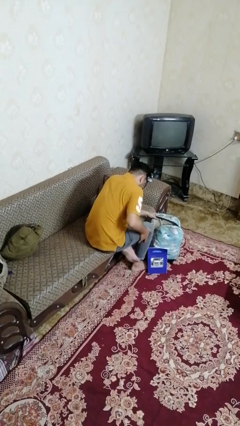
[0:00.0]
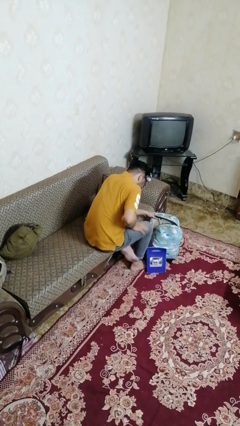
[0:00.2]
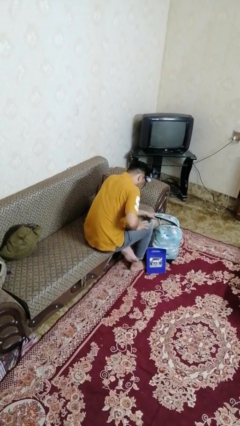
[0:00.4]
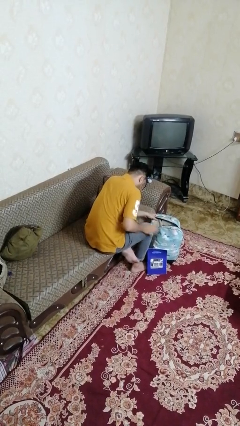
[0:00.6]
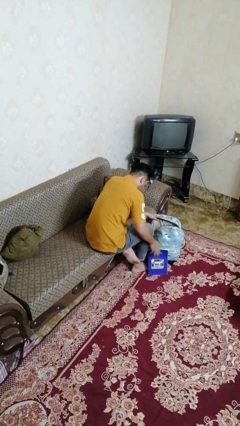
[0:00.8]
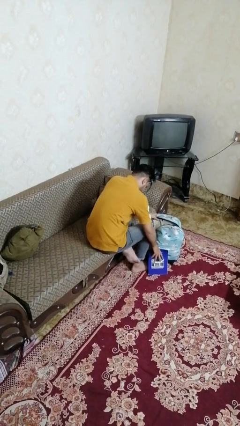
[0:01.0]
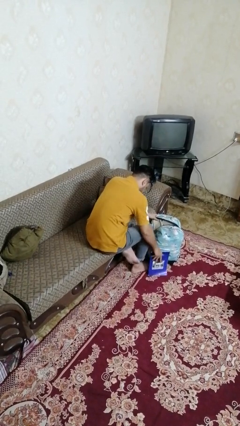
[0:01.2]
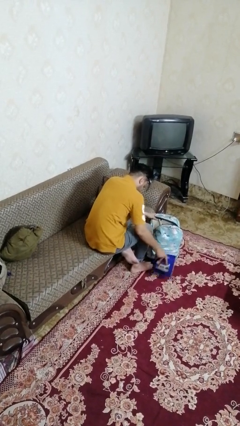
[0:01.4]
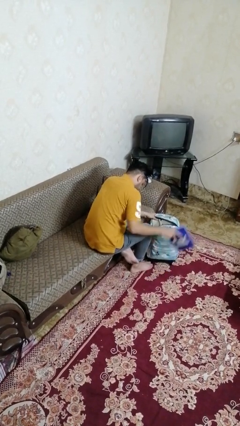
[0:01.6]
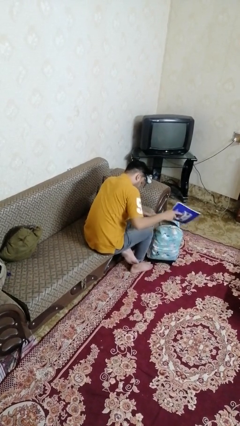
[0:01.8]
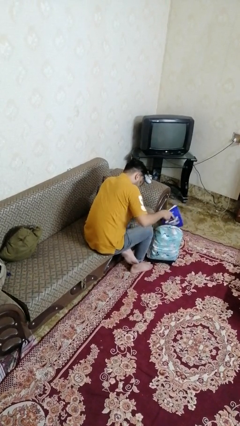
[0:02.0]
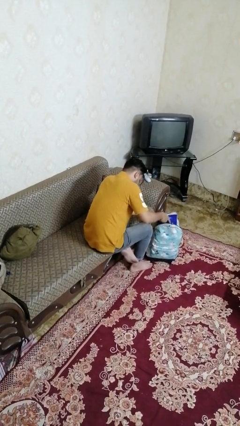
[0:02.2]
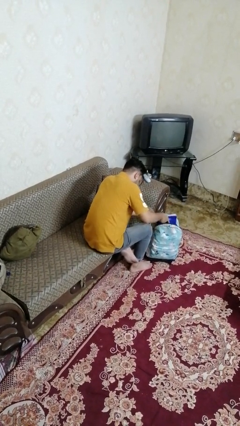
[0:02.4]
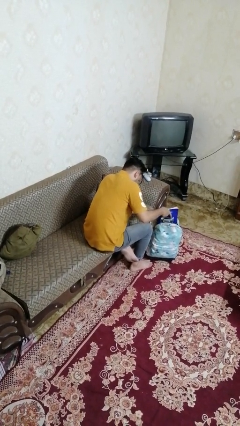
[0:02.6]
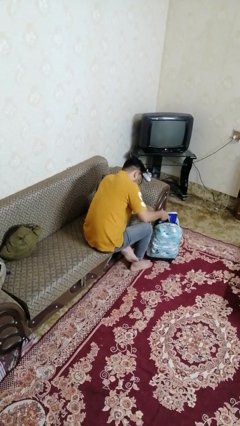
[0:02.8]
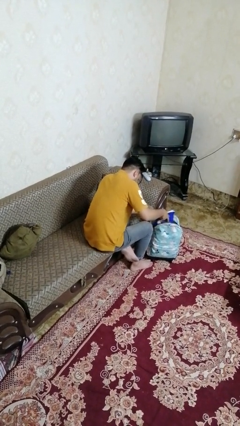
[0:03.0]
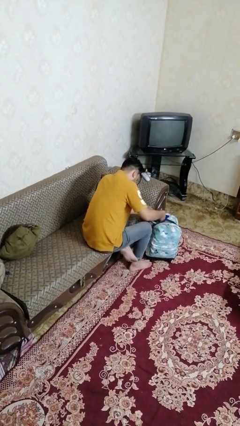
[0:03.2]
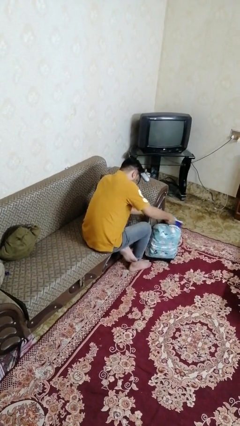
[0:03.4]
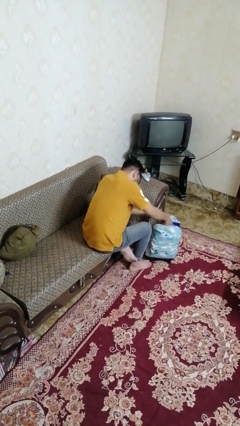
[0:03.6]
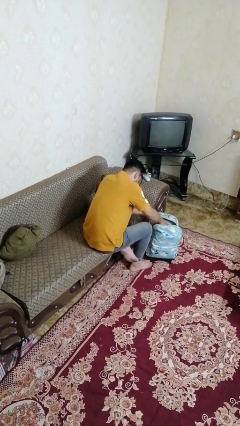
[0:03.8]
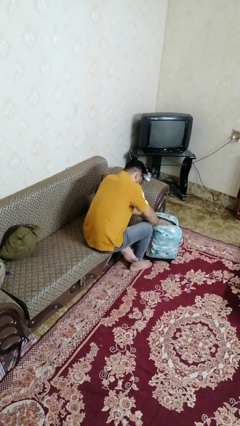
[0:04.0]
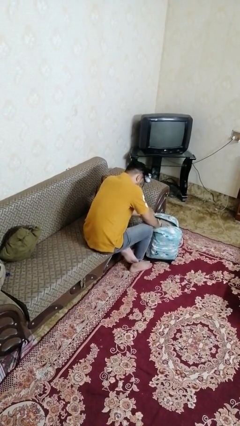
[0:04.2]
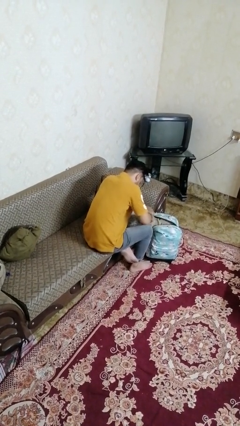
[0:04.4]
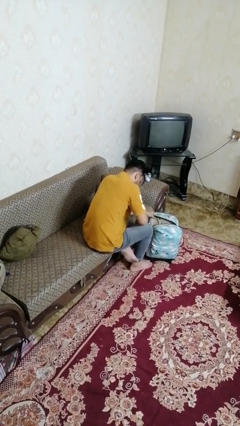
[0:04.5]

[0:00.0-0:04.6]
person puts object into bag

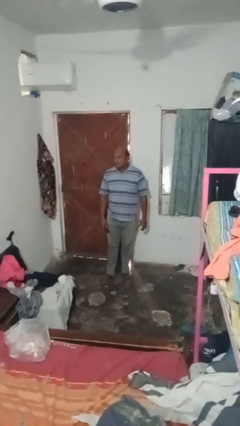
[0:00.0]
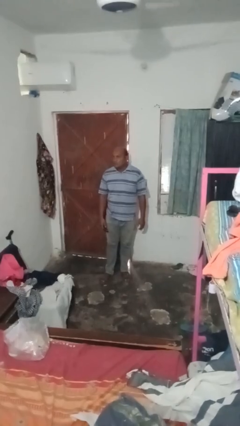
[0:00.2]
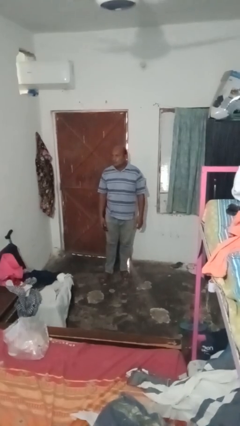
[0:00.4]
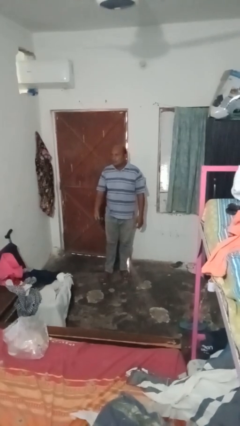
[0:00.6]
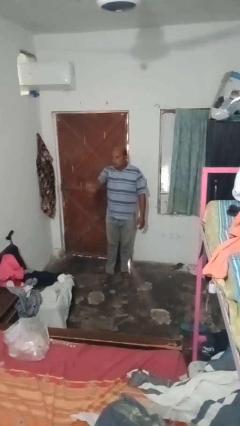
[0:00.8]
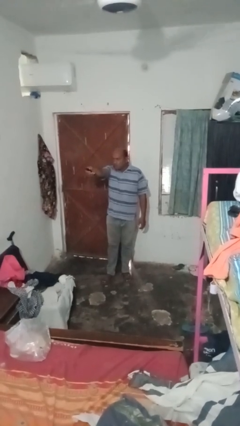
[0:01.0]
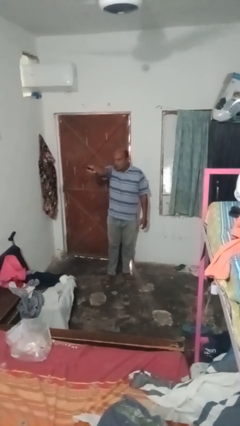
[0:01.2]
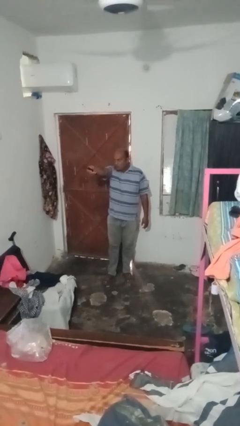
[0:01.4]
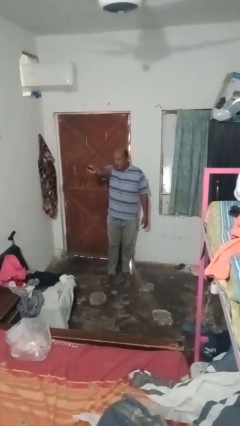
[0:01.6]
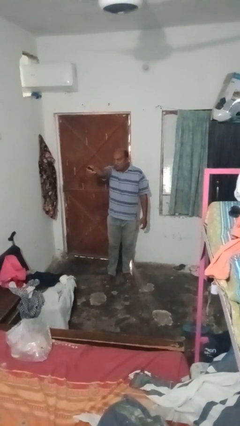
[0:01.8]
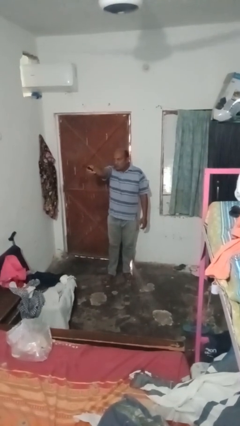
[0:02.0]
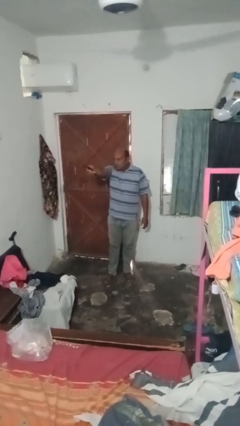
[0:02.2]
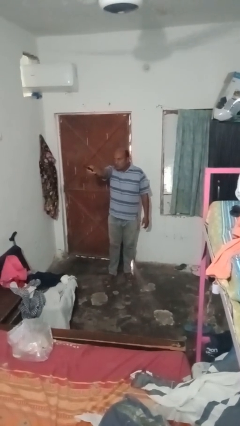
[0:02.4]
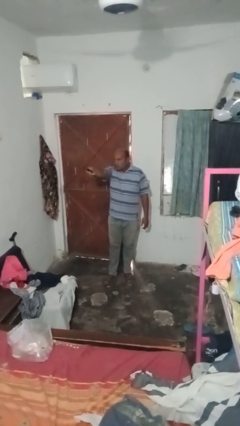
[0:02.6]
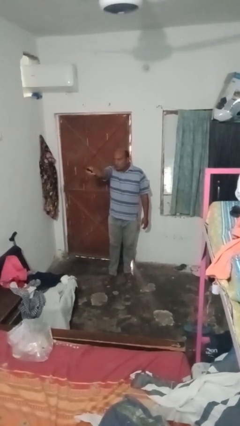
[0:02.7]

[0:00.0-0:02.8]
person uses television remote

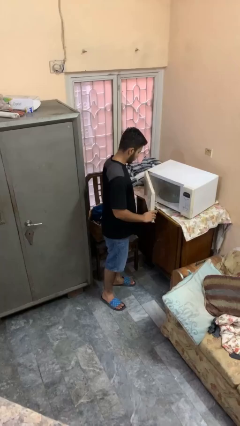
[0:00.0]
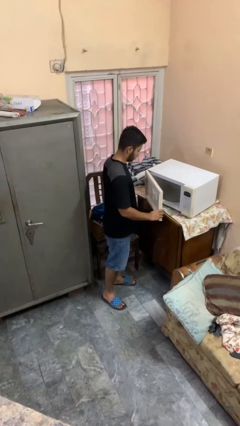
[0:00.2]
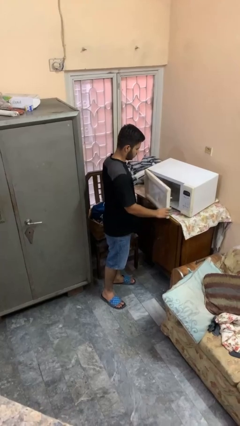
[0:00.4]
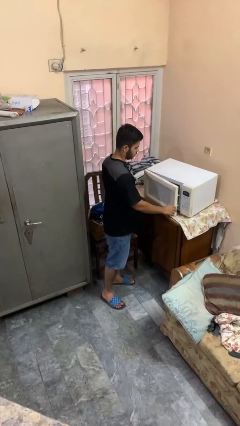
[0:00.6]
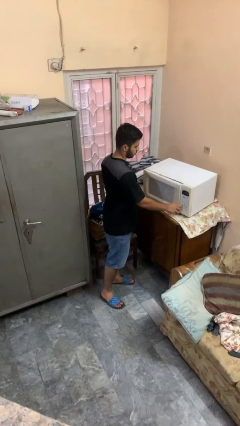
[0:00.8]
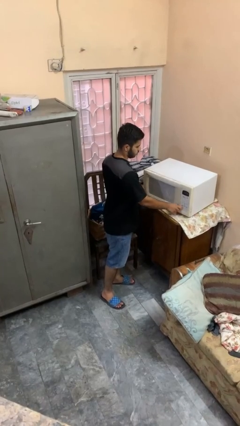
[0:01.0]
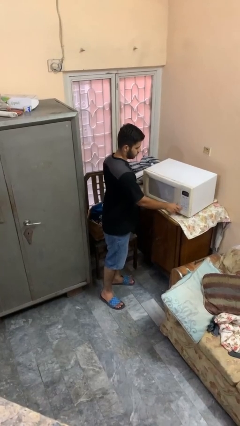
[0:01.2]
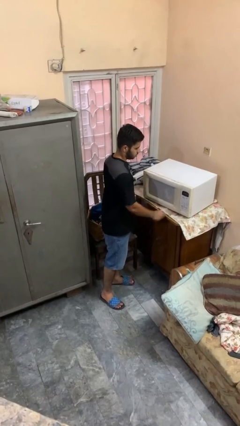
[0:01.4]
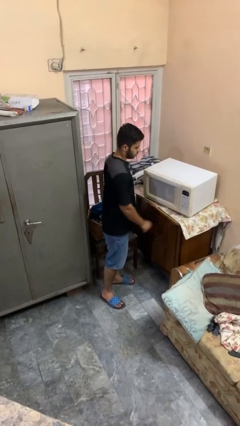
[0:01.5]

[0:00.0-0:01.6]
person closes microwave

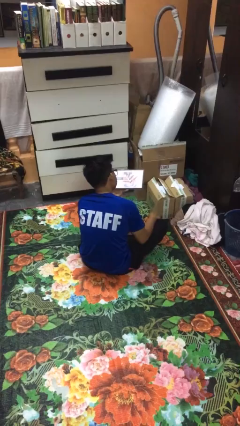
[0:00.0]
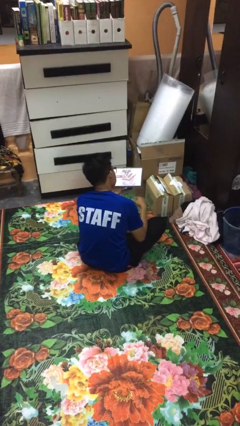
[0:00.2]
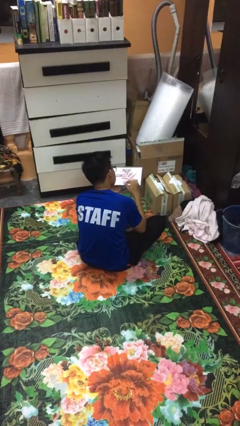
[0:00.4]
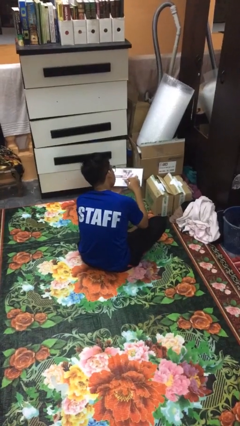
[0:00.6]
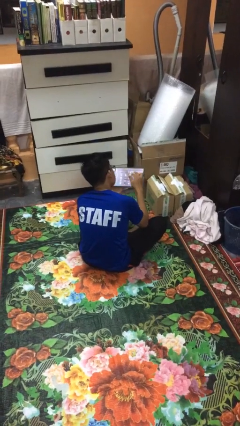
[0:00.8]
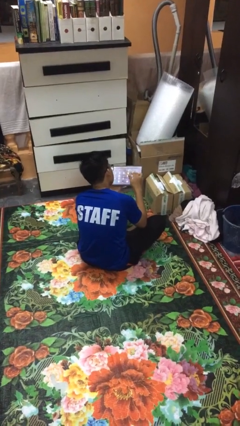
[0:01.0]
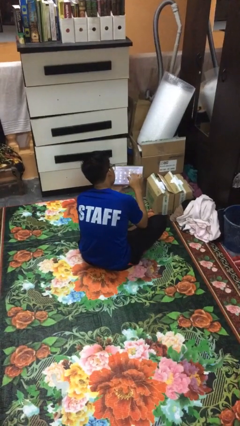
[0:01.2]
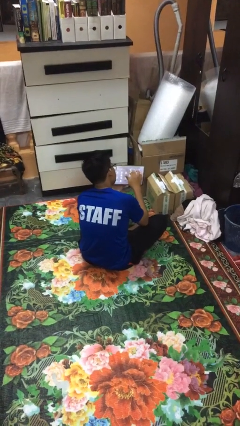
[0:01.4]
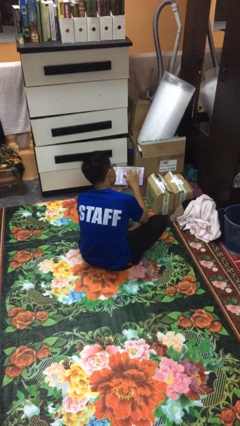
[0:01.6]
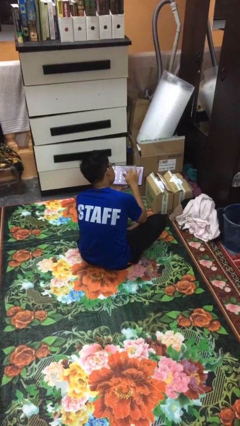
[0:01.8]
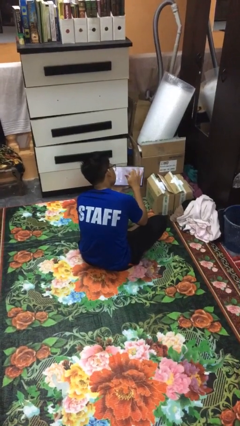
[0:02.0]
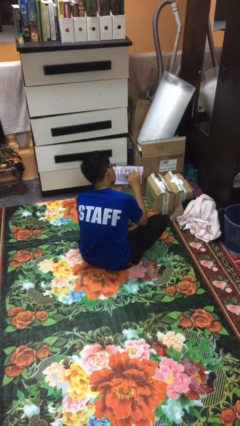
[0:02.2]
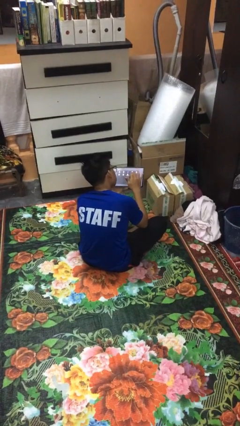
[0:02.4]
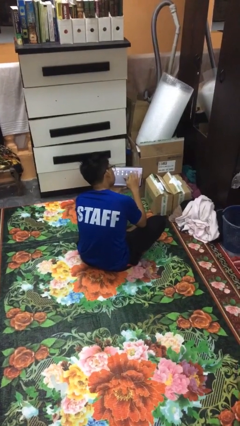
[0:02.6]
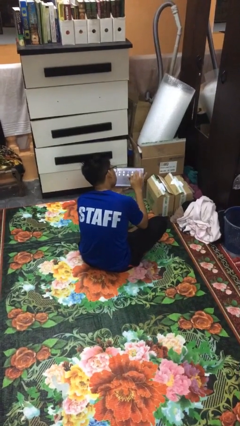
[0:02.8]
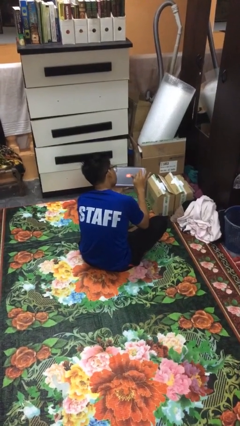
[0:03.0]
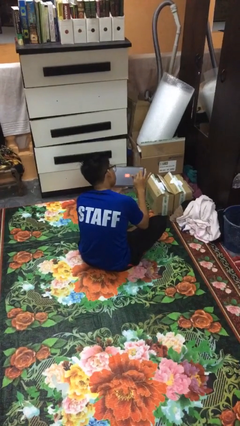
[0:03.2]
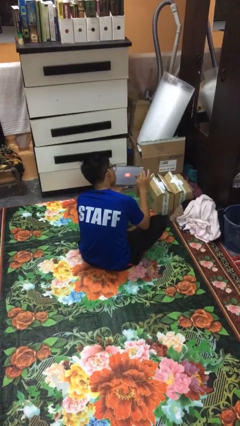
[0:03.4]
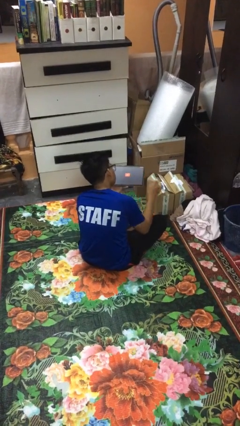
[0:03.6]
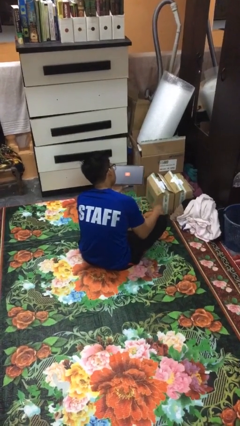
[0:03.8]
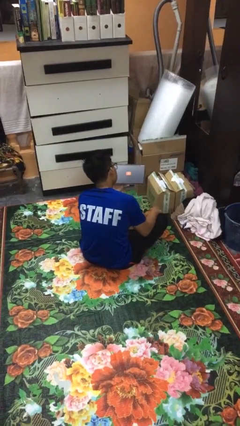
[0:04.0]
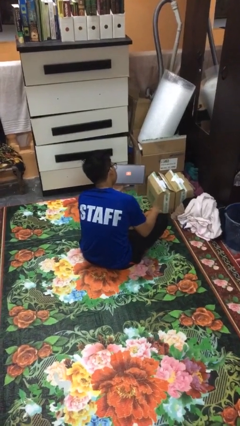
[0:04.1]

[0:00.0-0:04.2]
person interacts with tablet

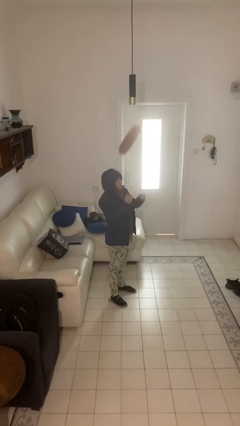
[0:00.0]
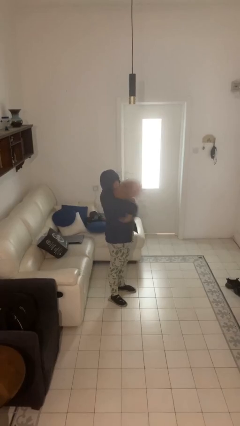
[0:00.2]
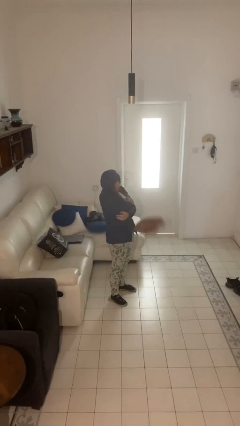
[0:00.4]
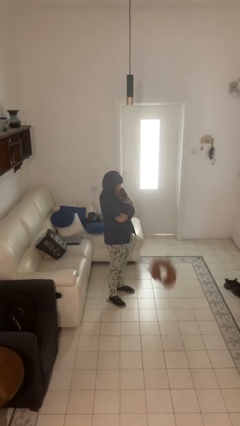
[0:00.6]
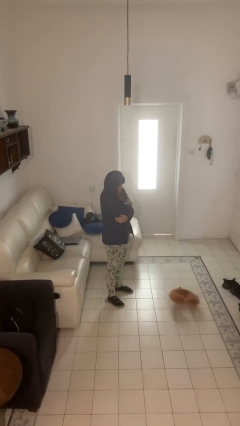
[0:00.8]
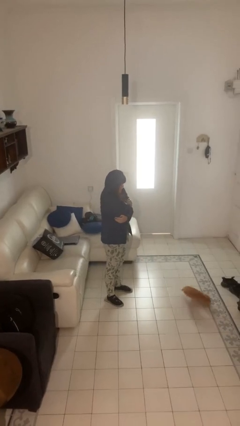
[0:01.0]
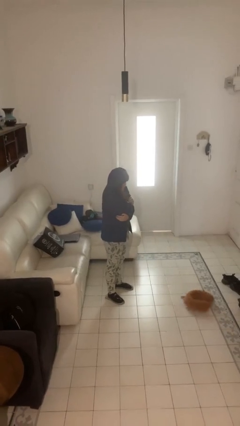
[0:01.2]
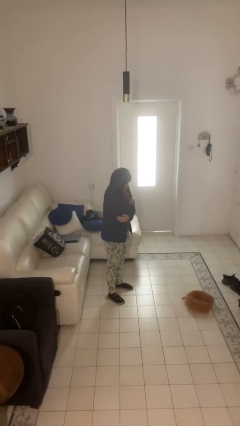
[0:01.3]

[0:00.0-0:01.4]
person catches dropped object

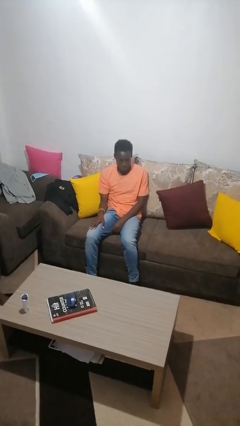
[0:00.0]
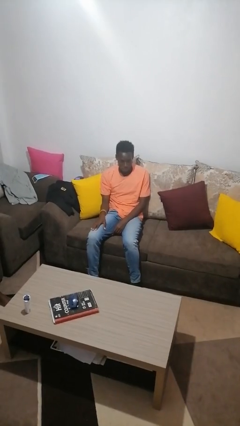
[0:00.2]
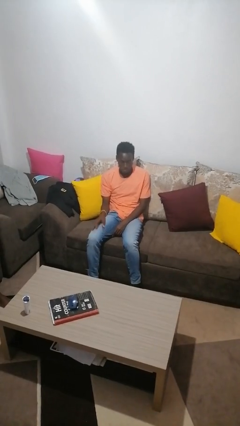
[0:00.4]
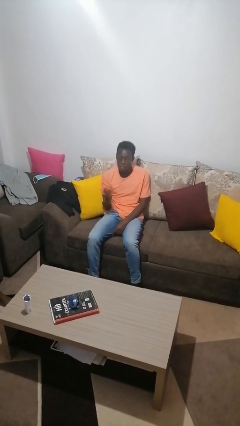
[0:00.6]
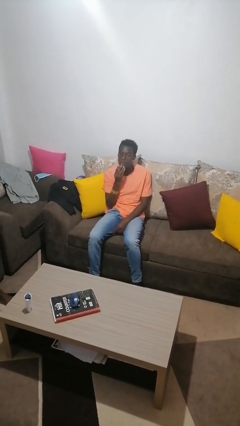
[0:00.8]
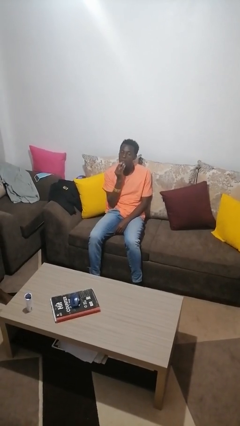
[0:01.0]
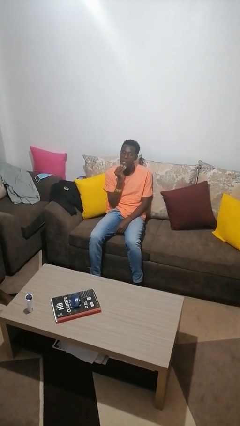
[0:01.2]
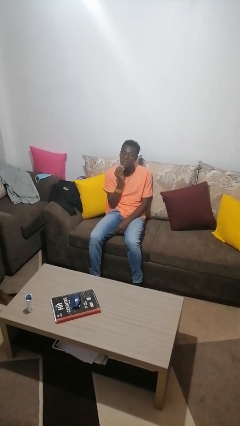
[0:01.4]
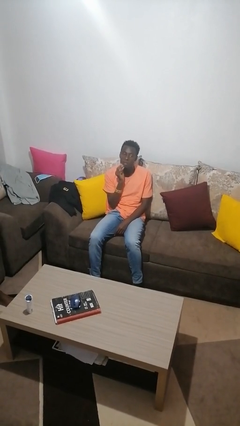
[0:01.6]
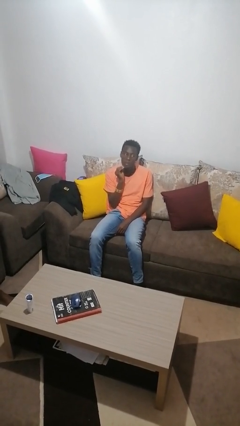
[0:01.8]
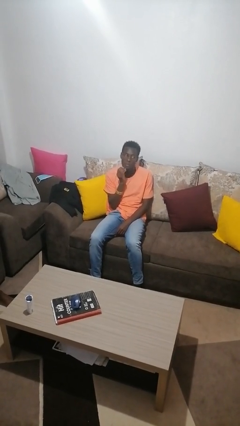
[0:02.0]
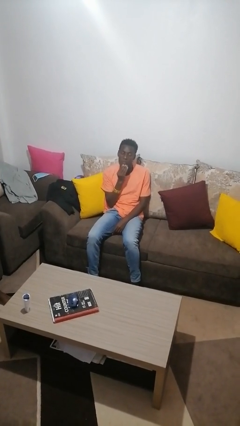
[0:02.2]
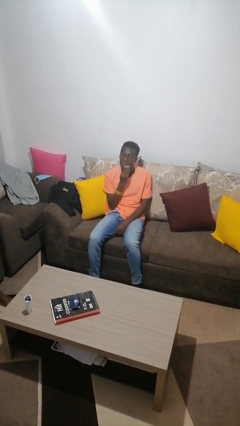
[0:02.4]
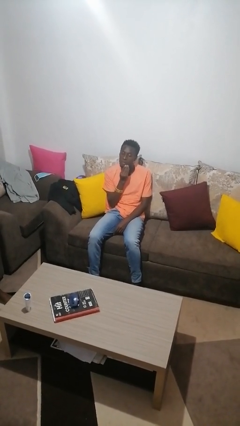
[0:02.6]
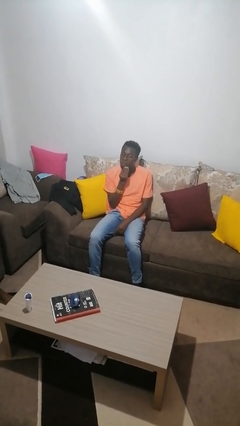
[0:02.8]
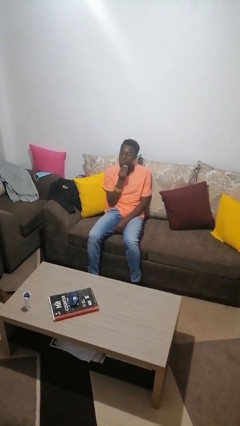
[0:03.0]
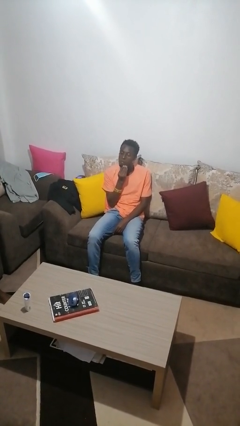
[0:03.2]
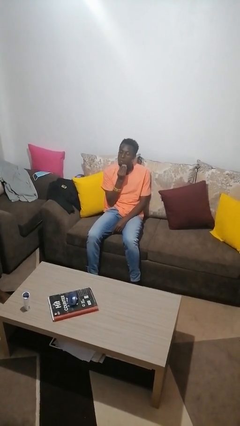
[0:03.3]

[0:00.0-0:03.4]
person strokes chin
